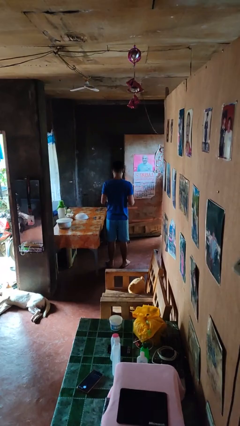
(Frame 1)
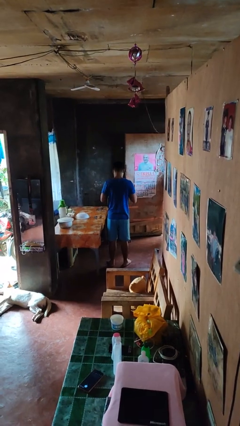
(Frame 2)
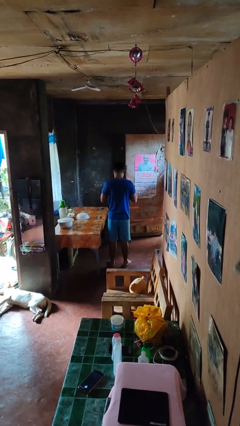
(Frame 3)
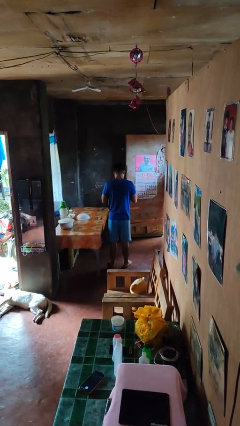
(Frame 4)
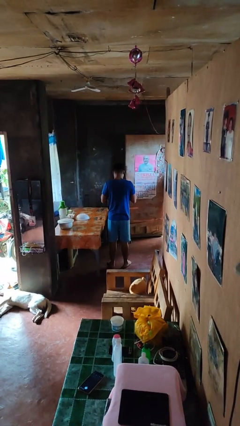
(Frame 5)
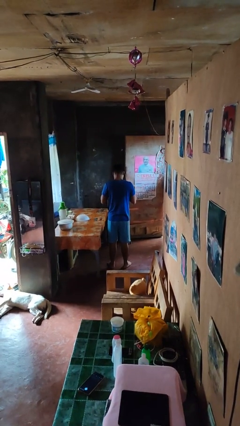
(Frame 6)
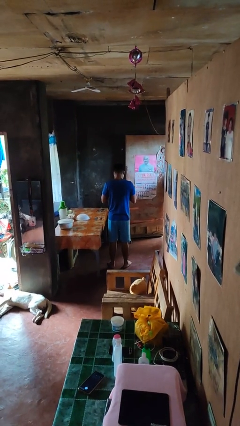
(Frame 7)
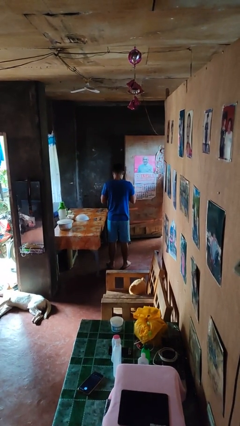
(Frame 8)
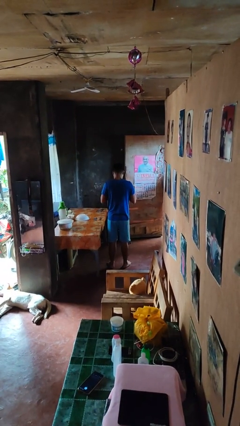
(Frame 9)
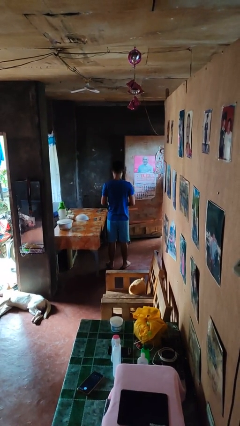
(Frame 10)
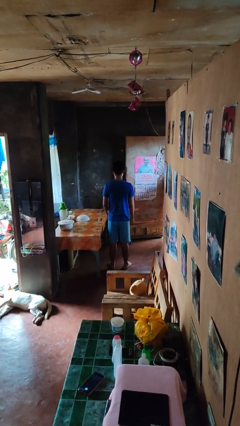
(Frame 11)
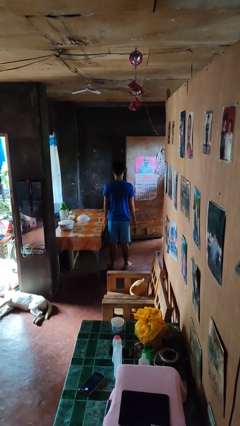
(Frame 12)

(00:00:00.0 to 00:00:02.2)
person buttons shirt

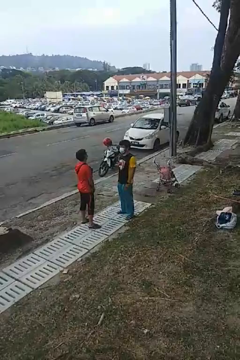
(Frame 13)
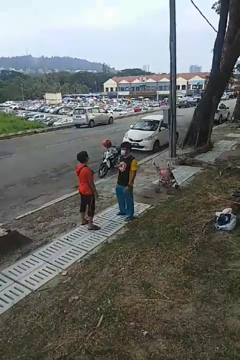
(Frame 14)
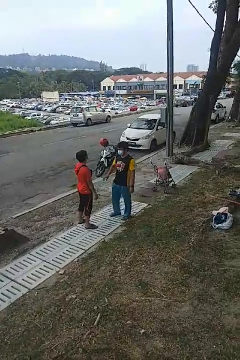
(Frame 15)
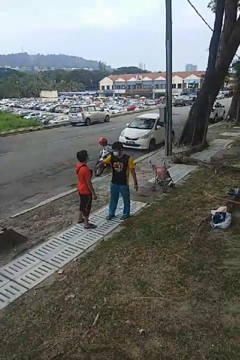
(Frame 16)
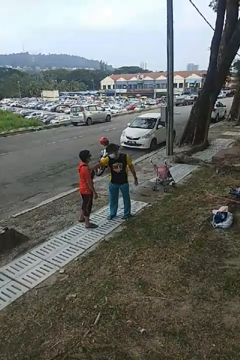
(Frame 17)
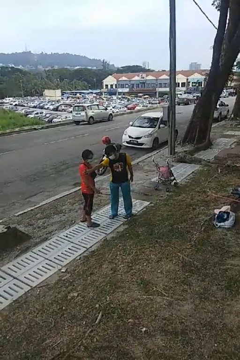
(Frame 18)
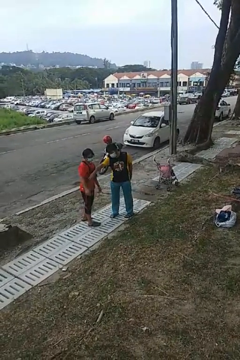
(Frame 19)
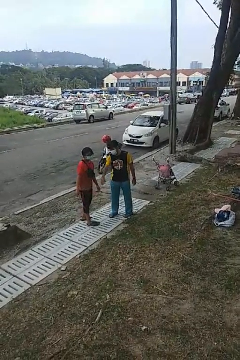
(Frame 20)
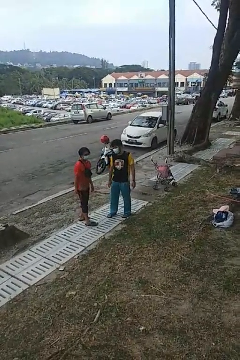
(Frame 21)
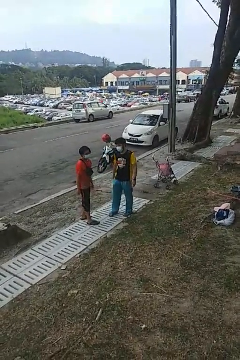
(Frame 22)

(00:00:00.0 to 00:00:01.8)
person shoves person

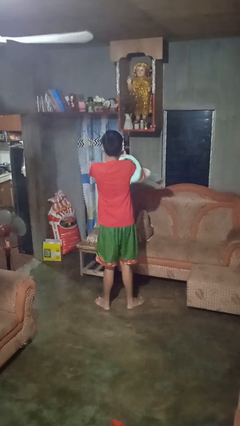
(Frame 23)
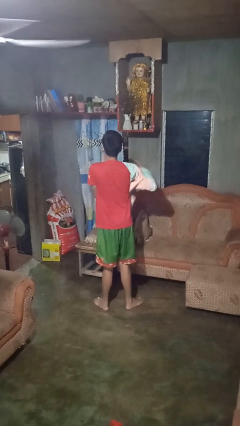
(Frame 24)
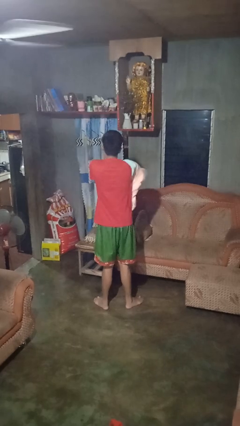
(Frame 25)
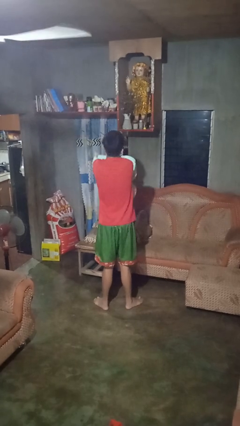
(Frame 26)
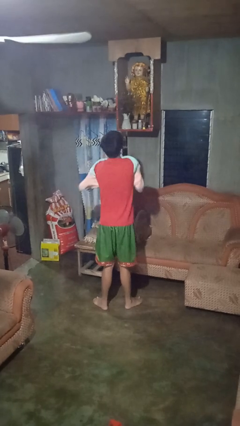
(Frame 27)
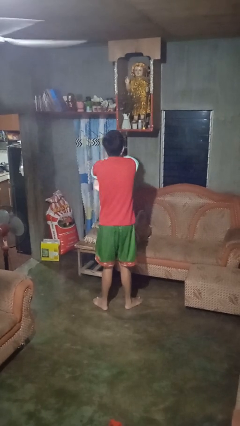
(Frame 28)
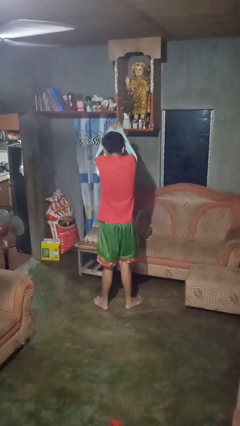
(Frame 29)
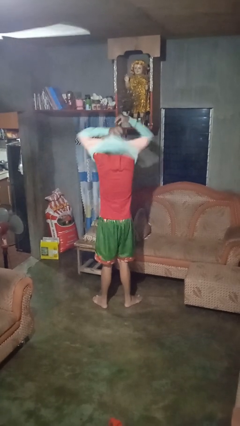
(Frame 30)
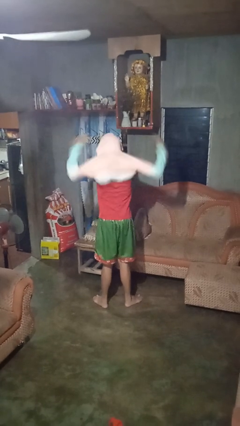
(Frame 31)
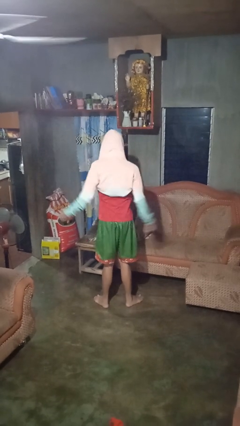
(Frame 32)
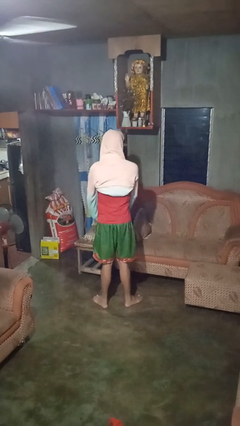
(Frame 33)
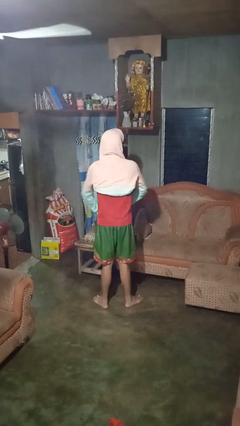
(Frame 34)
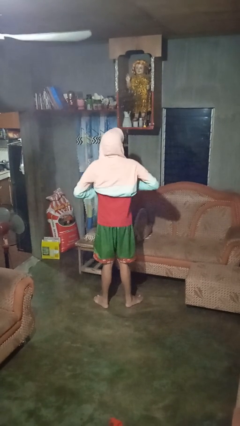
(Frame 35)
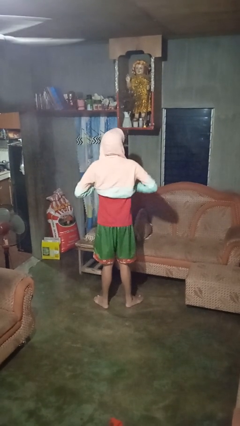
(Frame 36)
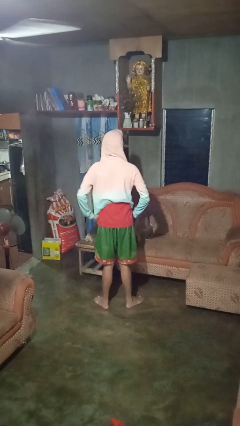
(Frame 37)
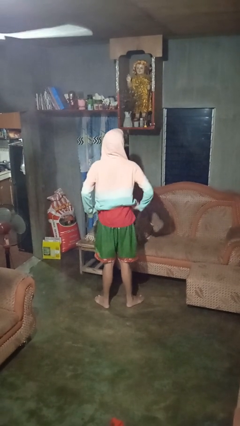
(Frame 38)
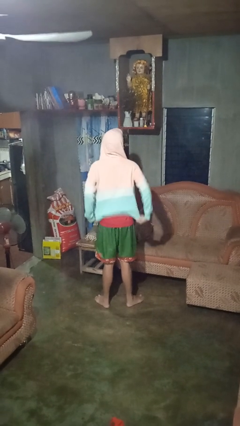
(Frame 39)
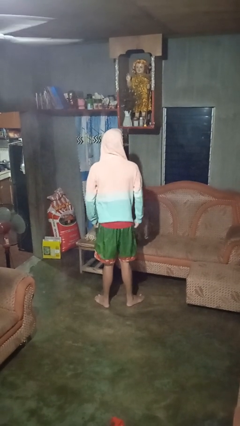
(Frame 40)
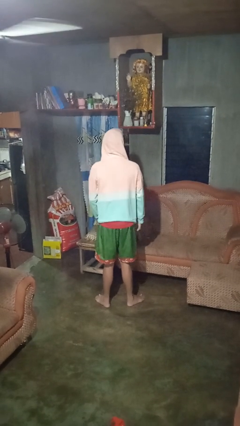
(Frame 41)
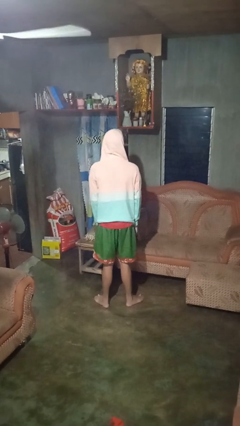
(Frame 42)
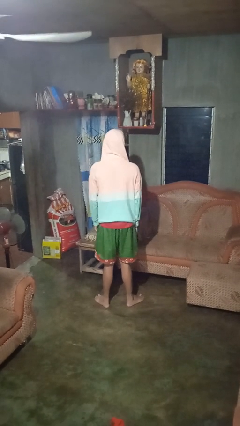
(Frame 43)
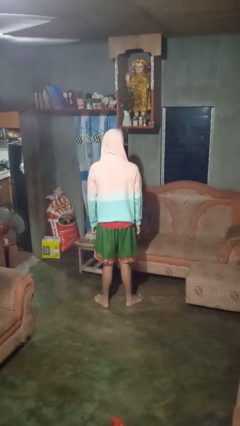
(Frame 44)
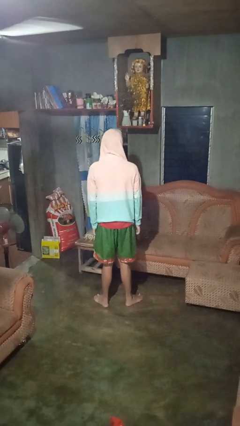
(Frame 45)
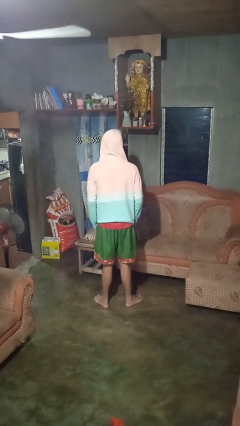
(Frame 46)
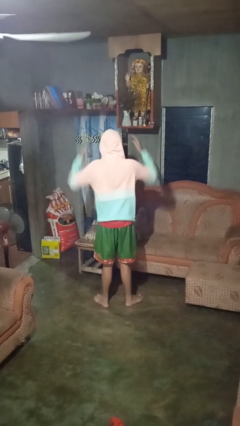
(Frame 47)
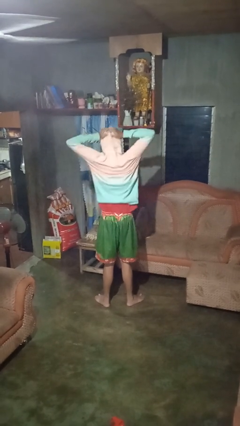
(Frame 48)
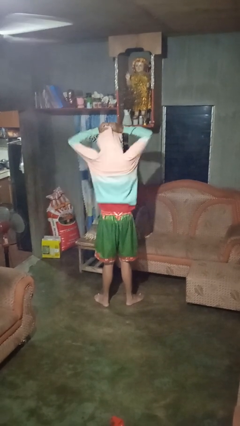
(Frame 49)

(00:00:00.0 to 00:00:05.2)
person puts on hoodie

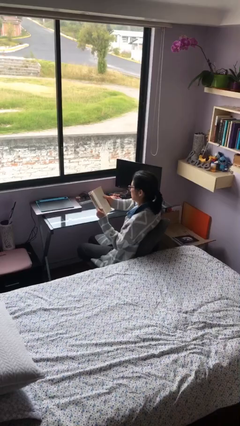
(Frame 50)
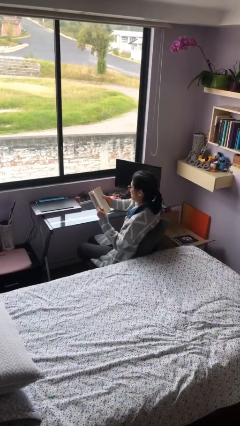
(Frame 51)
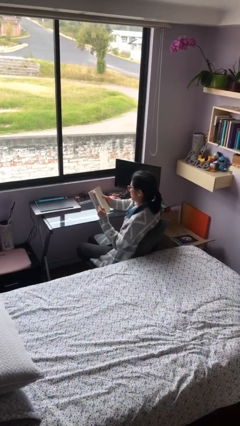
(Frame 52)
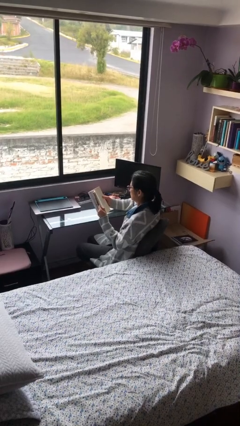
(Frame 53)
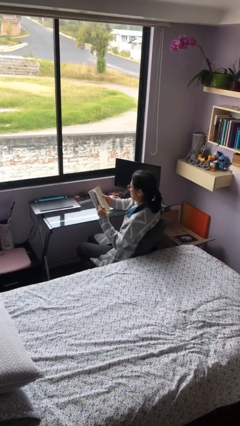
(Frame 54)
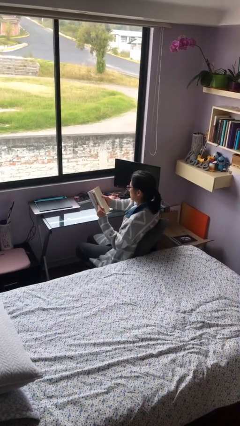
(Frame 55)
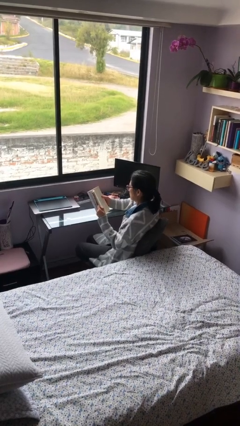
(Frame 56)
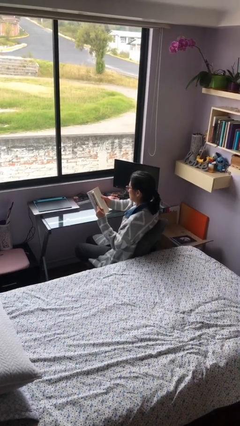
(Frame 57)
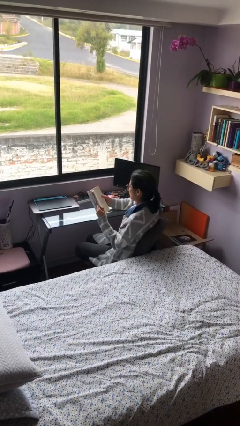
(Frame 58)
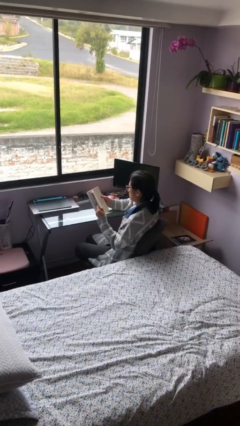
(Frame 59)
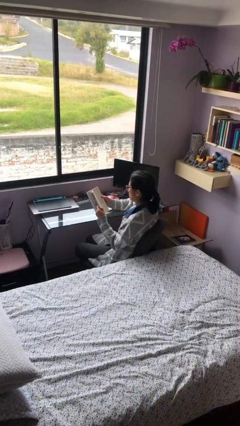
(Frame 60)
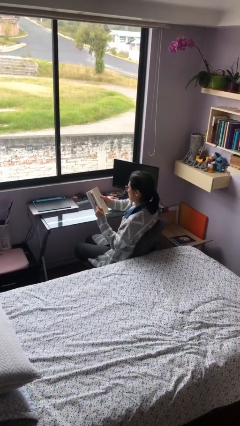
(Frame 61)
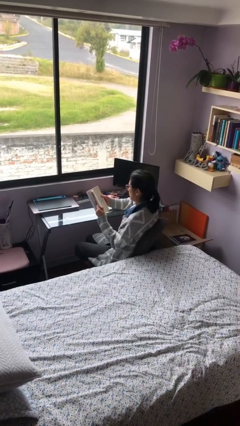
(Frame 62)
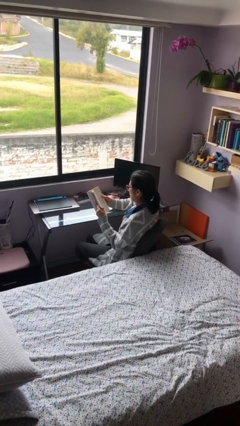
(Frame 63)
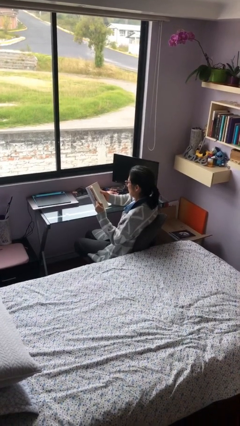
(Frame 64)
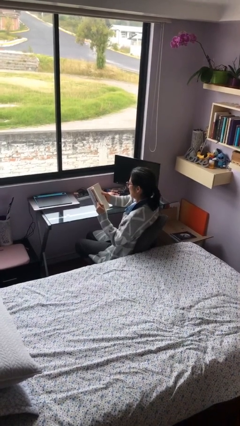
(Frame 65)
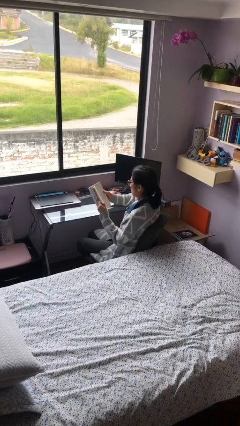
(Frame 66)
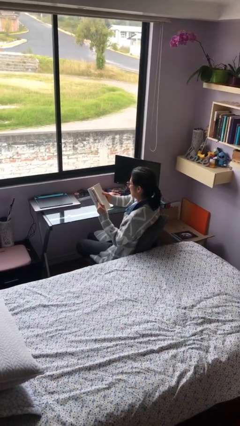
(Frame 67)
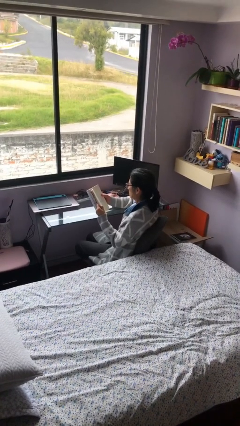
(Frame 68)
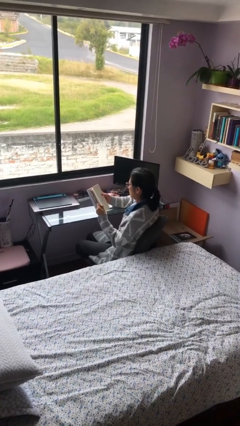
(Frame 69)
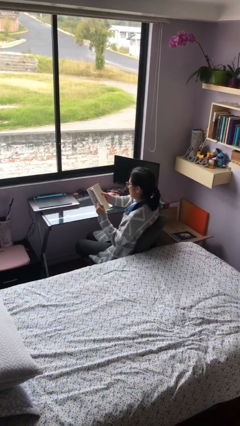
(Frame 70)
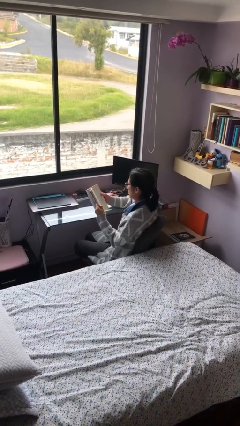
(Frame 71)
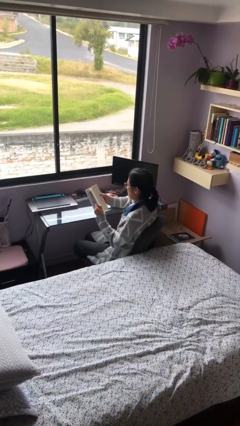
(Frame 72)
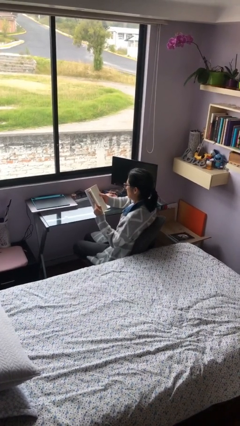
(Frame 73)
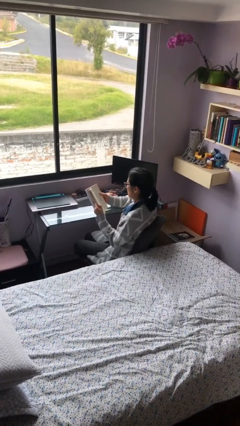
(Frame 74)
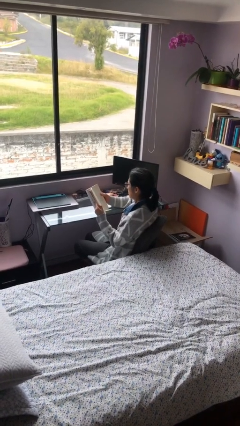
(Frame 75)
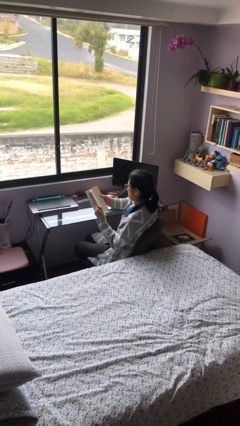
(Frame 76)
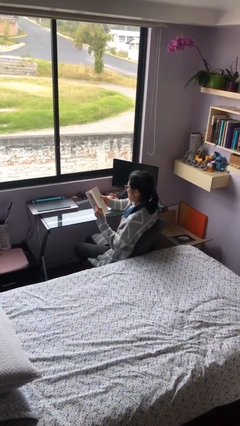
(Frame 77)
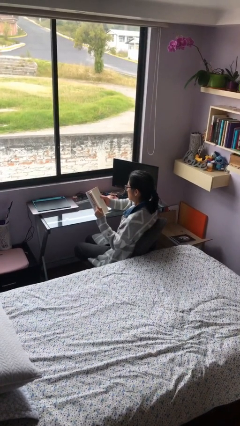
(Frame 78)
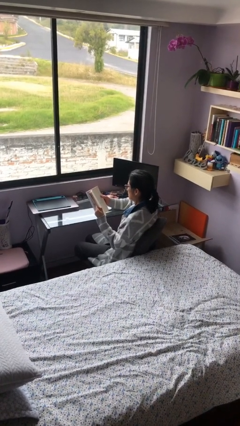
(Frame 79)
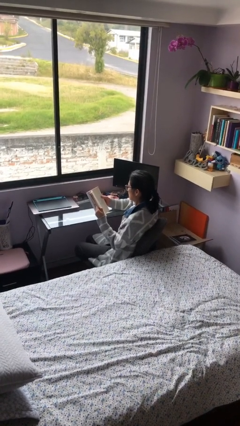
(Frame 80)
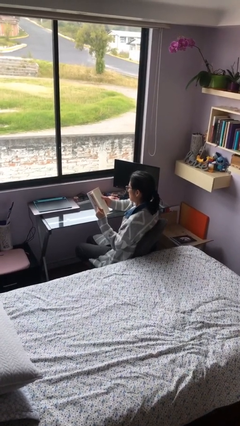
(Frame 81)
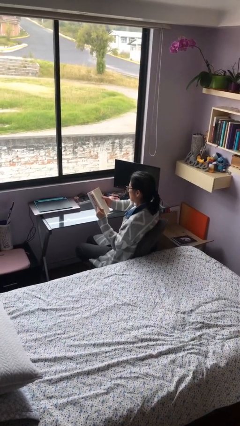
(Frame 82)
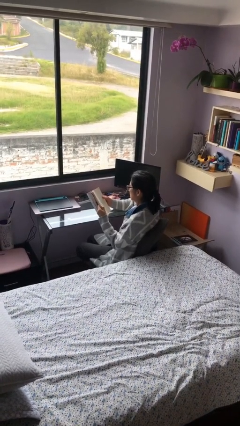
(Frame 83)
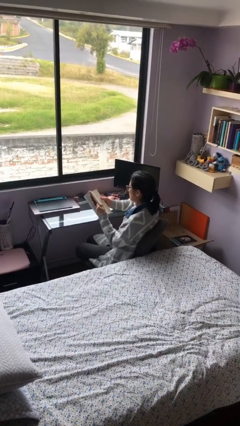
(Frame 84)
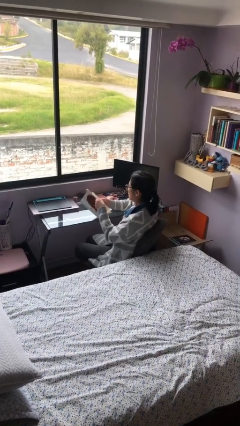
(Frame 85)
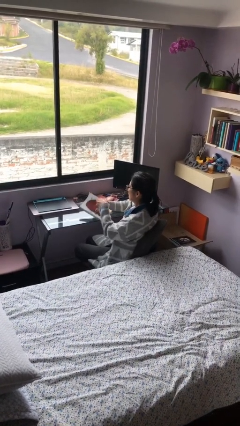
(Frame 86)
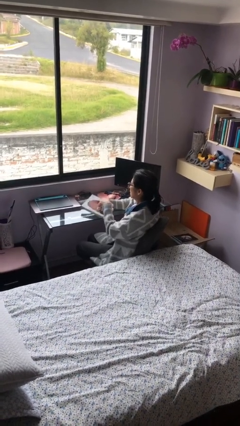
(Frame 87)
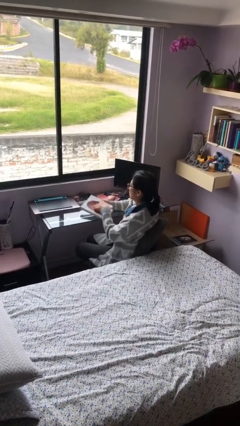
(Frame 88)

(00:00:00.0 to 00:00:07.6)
person reads document

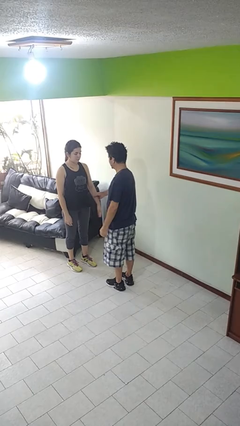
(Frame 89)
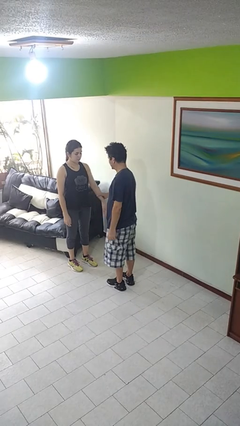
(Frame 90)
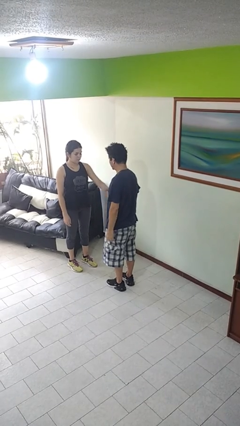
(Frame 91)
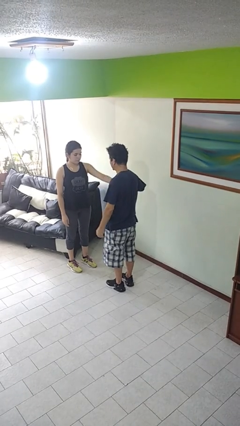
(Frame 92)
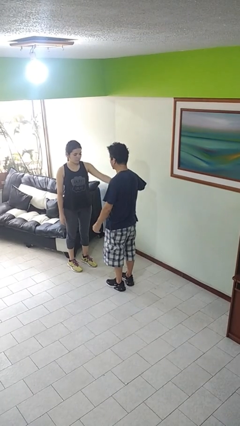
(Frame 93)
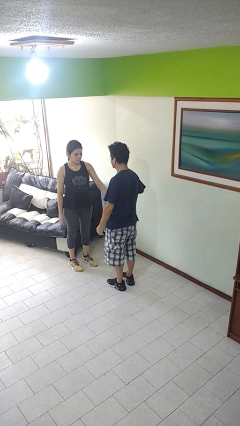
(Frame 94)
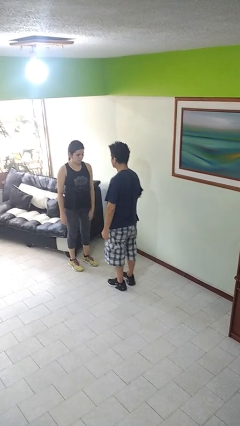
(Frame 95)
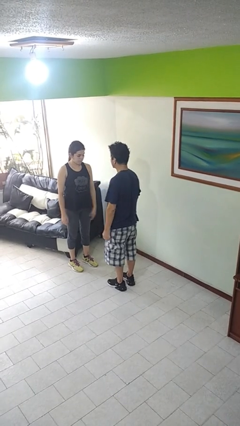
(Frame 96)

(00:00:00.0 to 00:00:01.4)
person grabs person by forearm
